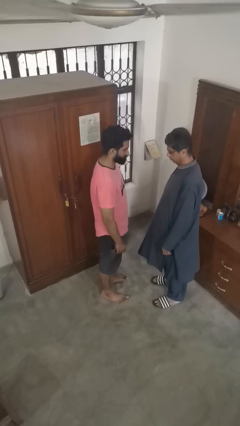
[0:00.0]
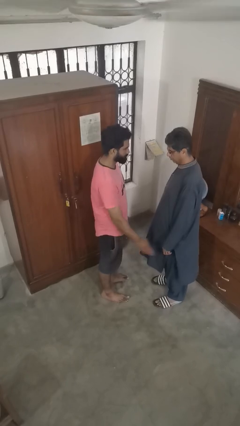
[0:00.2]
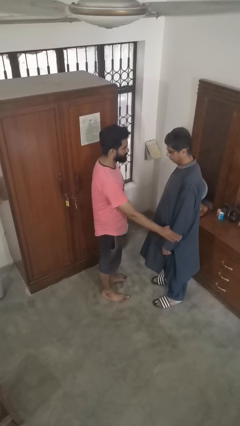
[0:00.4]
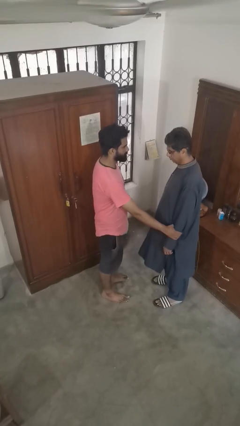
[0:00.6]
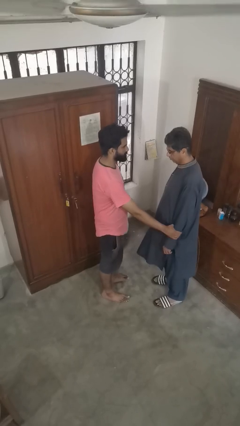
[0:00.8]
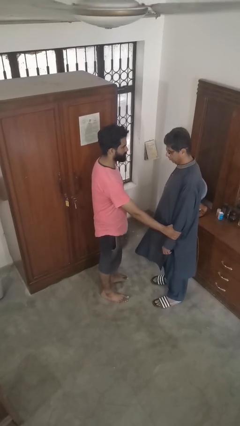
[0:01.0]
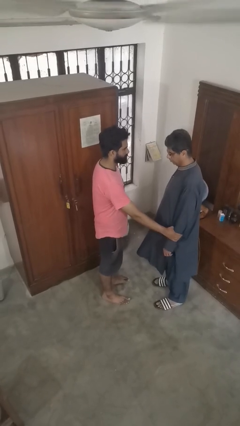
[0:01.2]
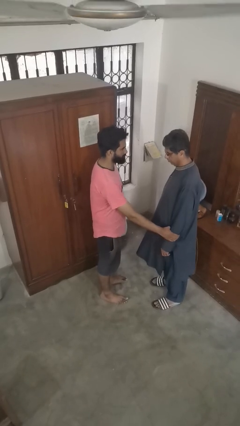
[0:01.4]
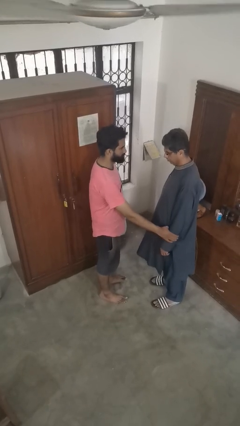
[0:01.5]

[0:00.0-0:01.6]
person grabs person by forearm

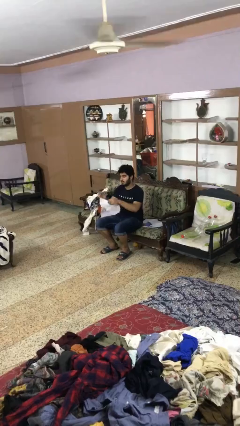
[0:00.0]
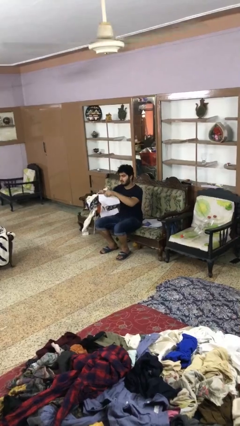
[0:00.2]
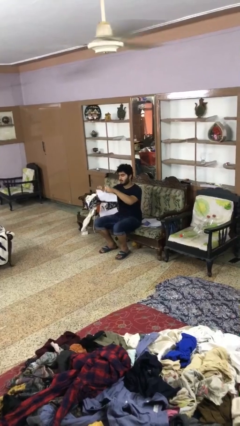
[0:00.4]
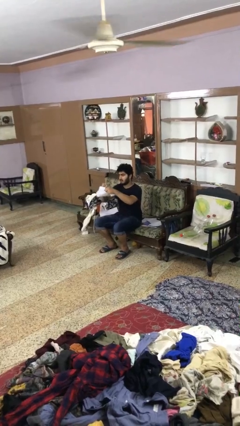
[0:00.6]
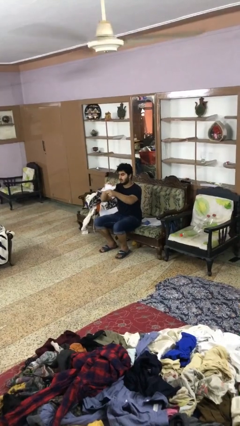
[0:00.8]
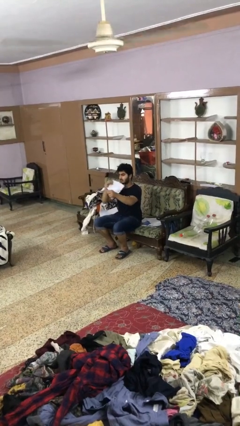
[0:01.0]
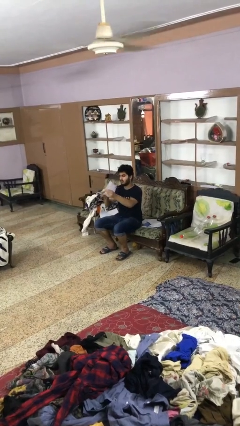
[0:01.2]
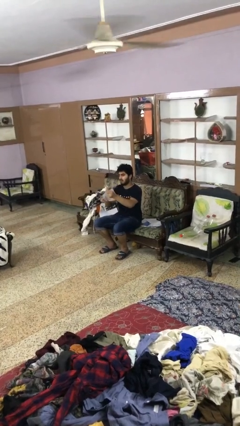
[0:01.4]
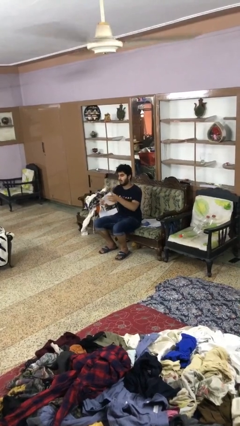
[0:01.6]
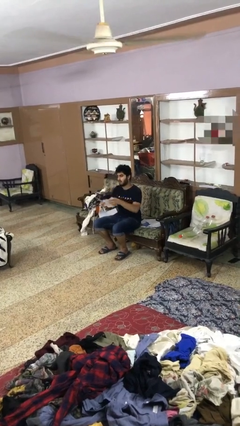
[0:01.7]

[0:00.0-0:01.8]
person tears paper

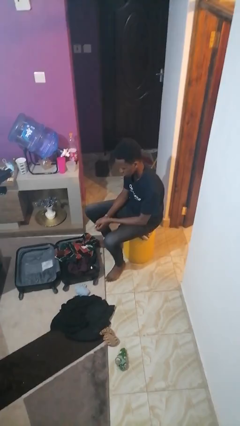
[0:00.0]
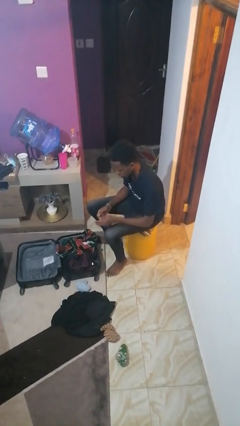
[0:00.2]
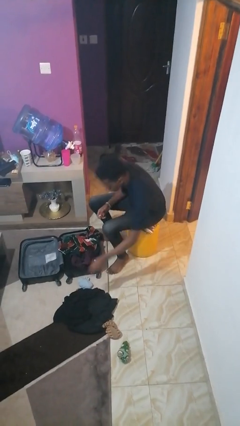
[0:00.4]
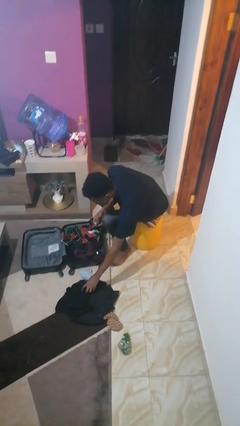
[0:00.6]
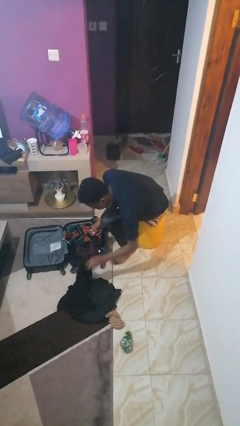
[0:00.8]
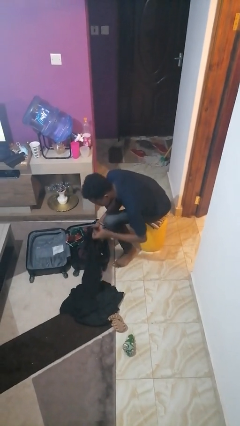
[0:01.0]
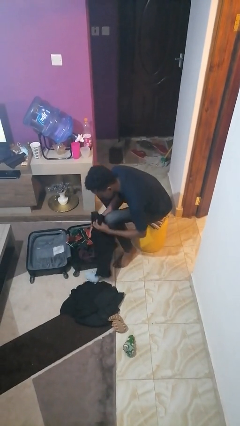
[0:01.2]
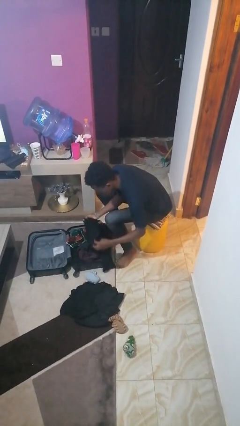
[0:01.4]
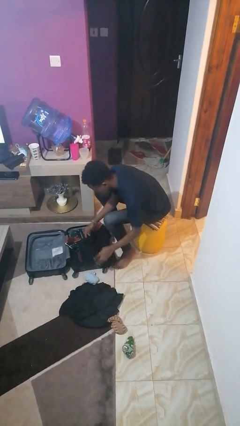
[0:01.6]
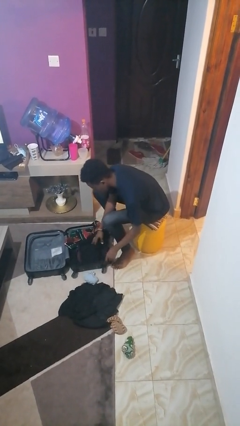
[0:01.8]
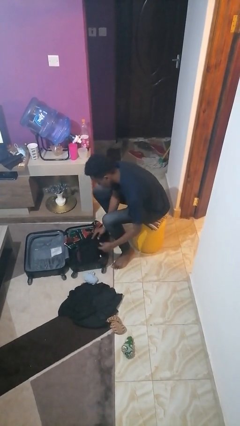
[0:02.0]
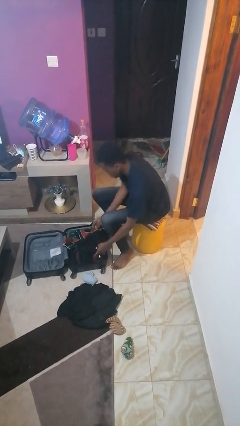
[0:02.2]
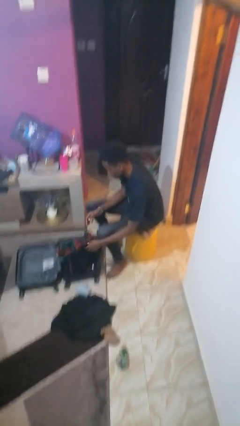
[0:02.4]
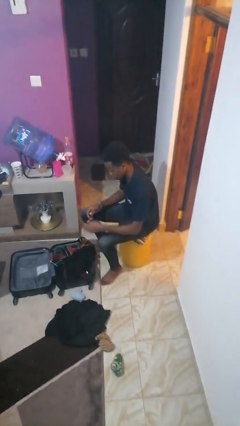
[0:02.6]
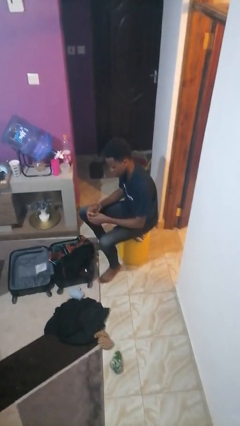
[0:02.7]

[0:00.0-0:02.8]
person loads clothes into suitcase

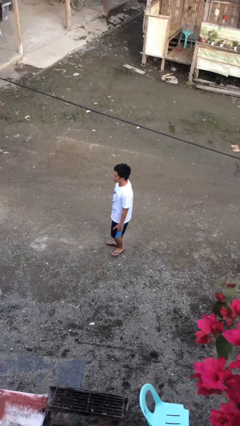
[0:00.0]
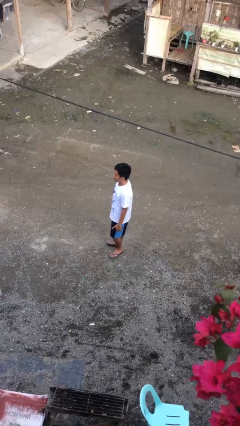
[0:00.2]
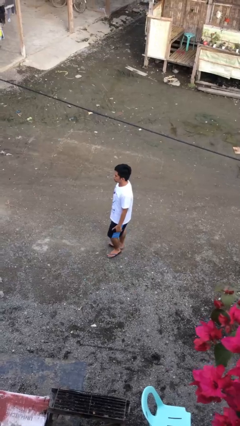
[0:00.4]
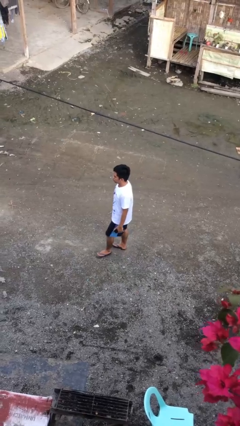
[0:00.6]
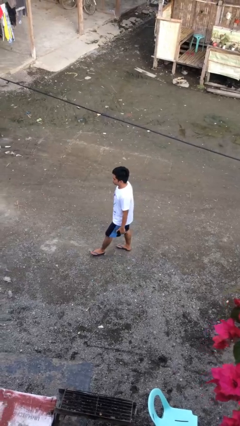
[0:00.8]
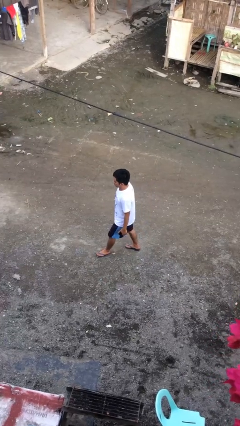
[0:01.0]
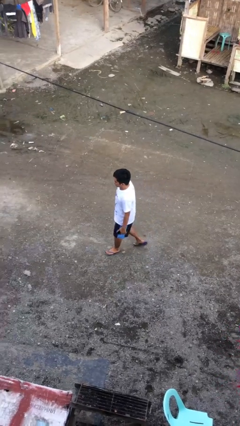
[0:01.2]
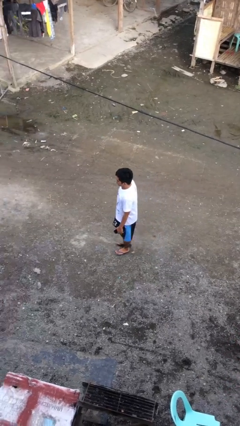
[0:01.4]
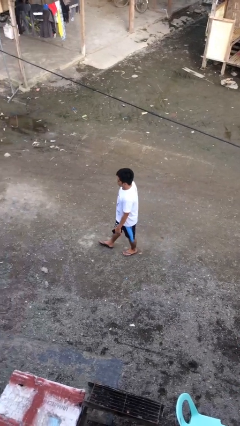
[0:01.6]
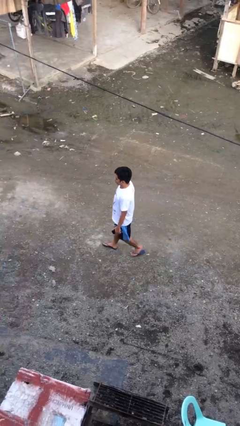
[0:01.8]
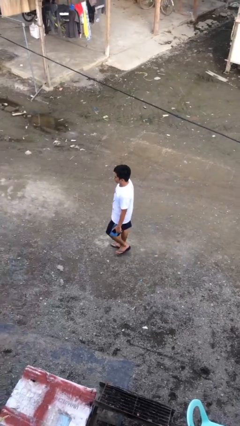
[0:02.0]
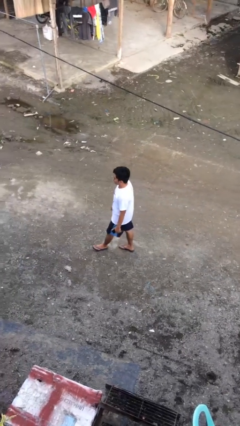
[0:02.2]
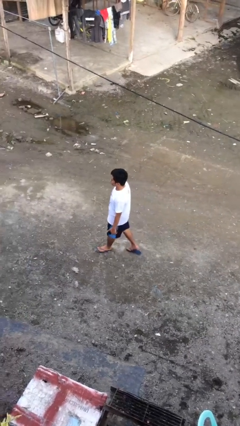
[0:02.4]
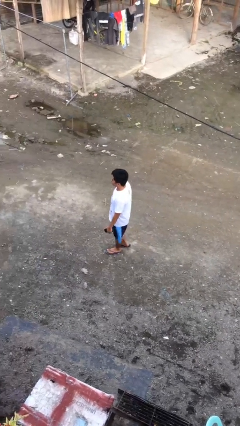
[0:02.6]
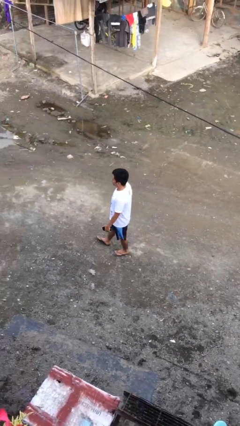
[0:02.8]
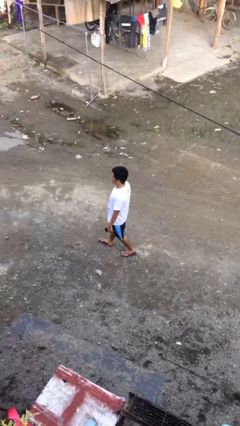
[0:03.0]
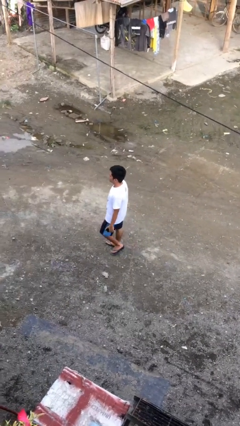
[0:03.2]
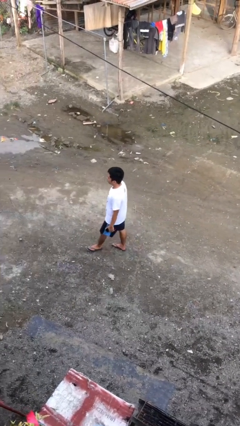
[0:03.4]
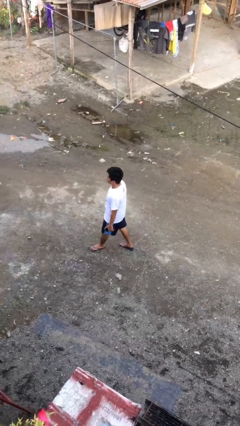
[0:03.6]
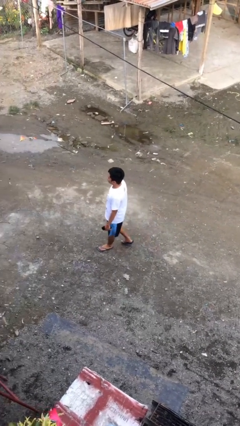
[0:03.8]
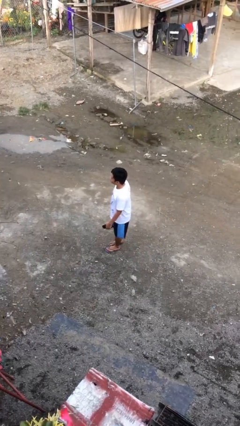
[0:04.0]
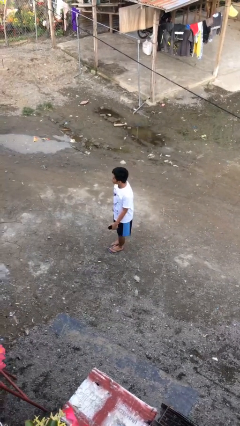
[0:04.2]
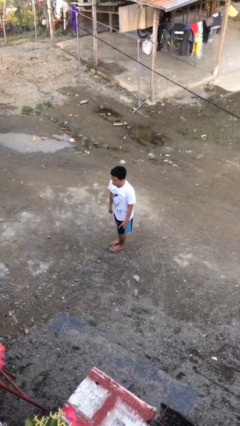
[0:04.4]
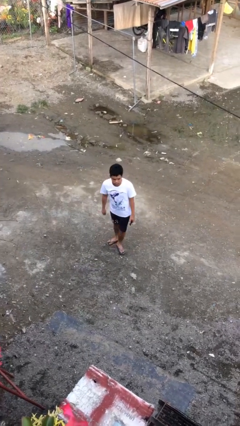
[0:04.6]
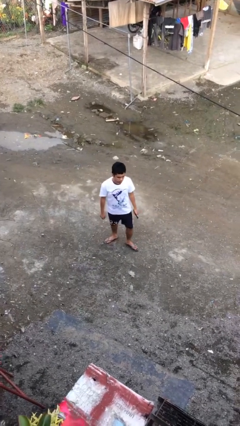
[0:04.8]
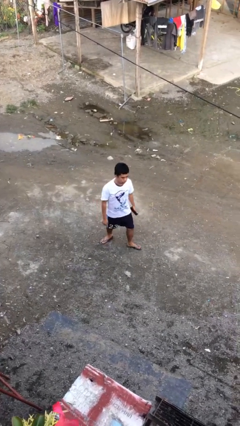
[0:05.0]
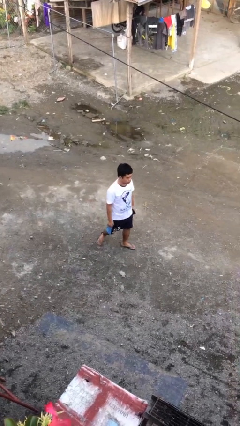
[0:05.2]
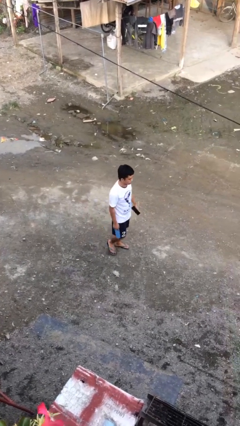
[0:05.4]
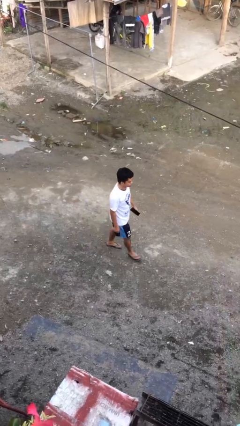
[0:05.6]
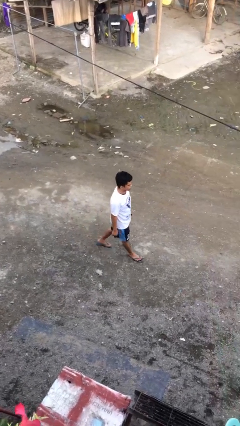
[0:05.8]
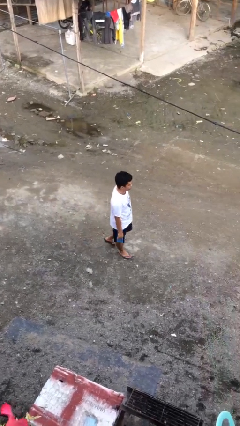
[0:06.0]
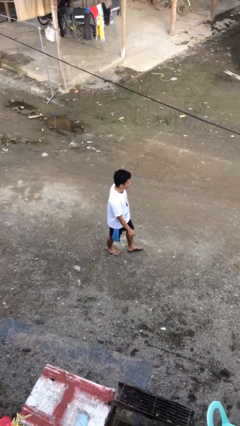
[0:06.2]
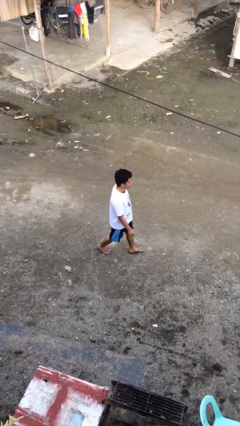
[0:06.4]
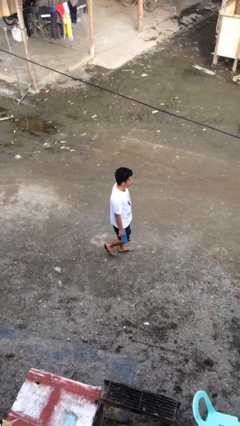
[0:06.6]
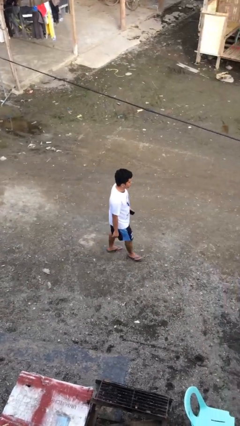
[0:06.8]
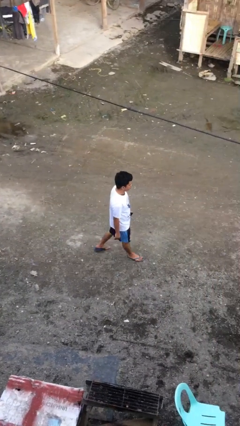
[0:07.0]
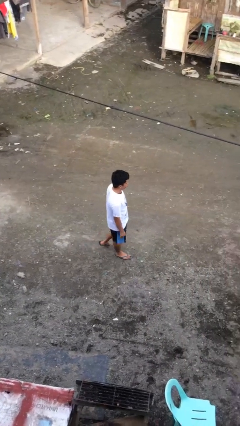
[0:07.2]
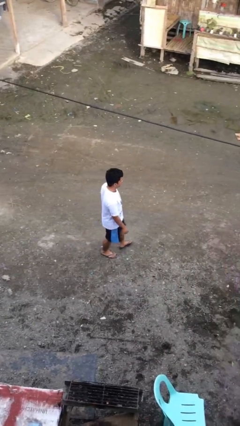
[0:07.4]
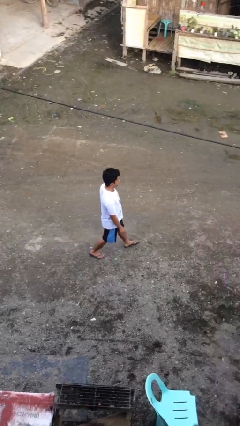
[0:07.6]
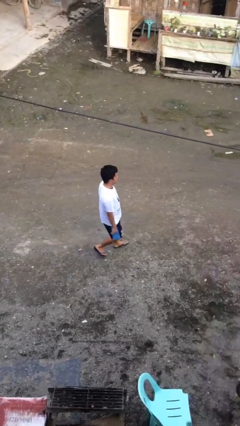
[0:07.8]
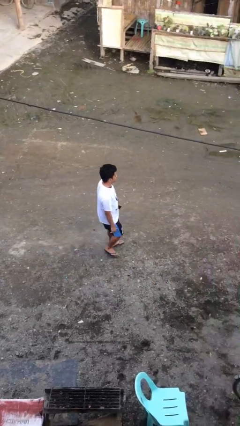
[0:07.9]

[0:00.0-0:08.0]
person walks

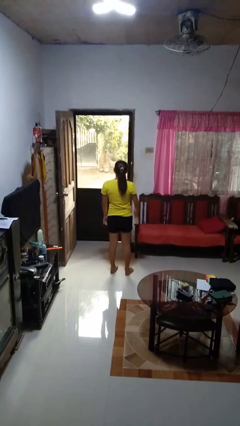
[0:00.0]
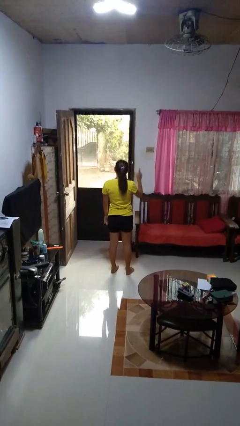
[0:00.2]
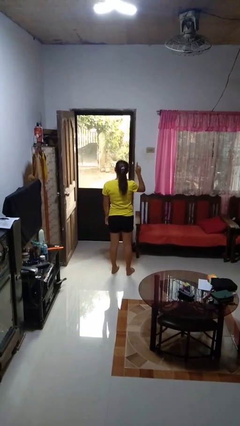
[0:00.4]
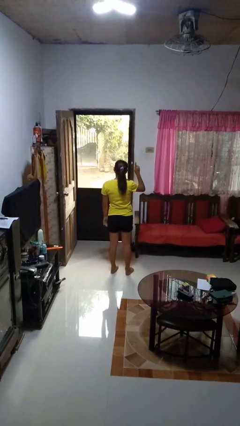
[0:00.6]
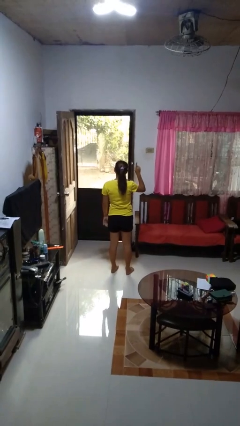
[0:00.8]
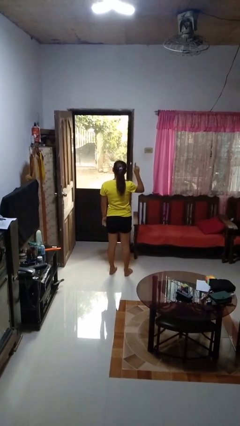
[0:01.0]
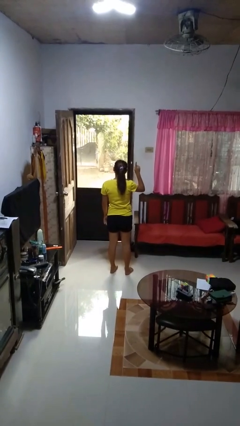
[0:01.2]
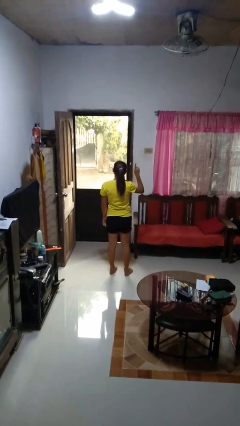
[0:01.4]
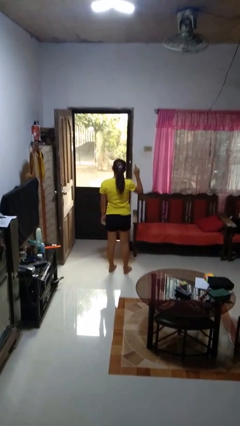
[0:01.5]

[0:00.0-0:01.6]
person gestures number one

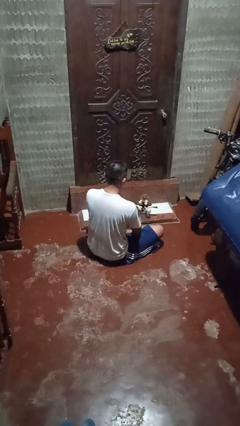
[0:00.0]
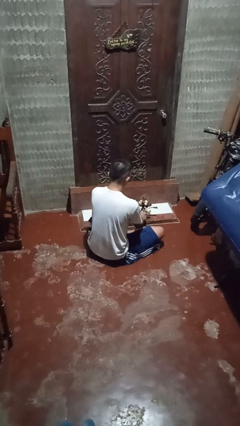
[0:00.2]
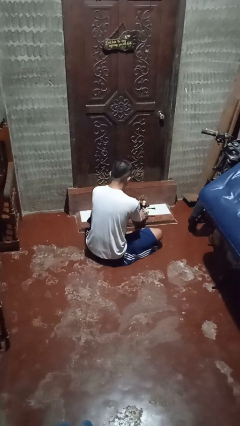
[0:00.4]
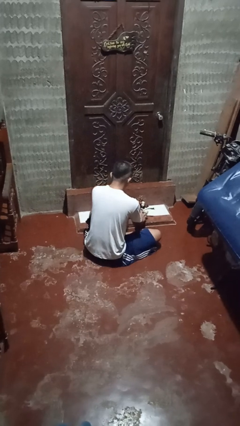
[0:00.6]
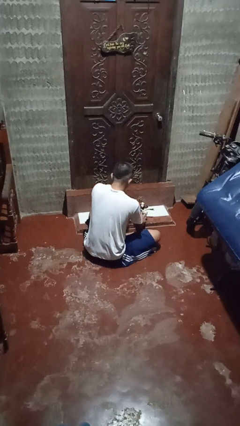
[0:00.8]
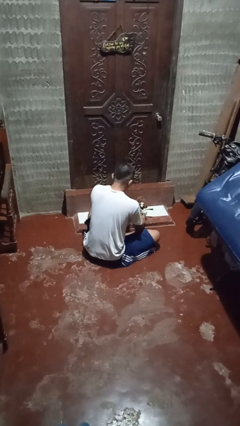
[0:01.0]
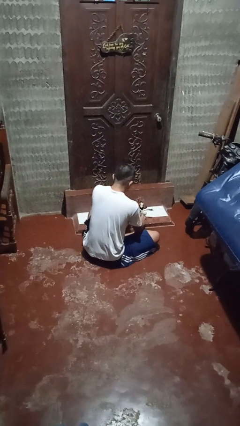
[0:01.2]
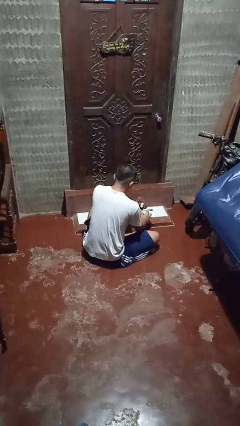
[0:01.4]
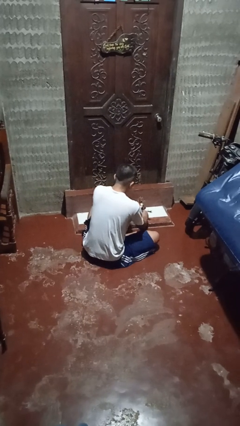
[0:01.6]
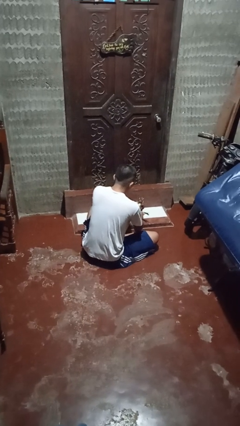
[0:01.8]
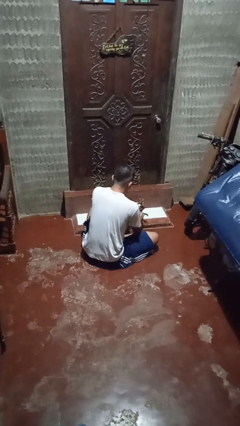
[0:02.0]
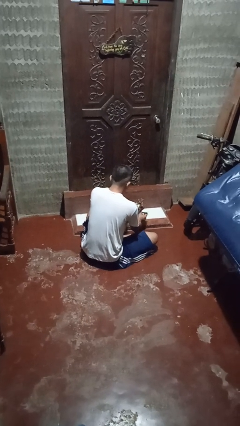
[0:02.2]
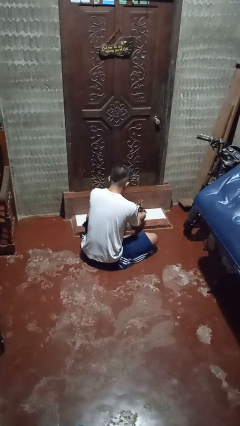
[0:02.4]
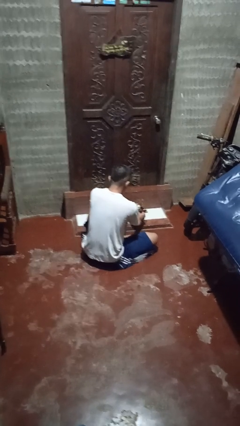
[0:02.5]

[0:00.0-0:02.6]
person arranges flowers in vase
